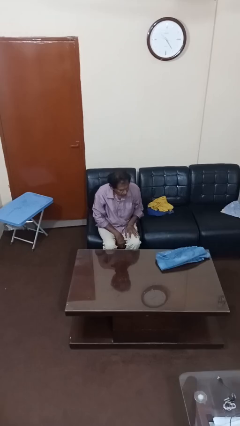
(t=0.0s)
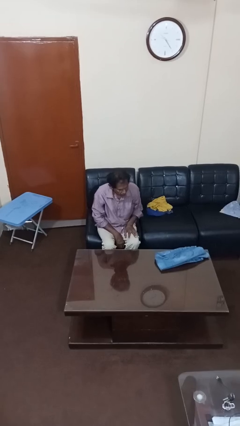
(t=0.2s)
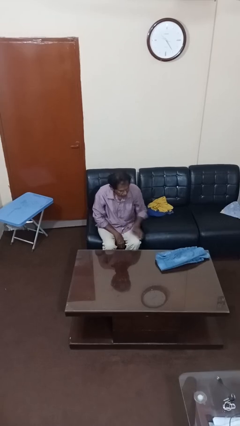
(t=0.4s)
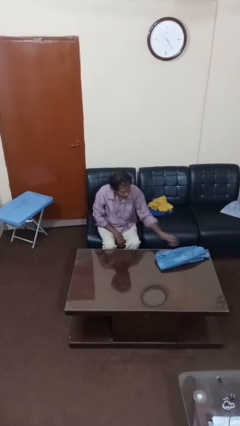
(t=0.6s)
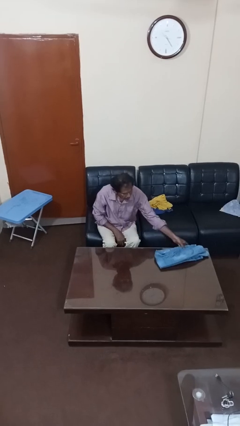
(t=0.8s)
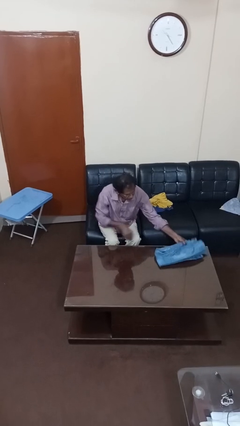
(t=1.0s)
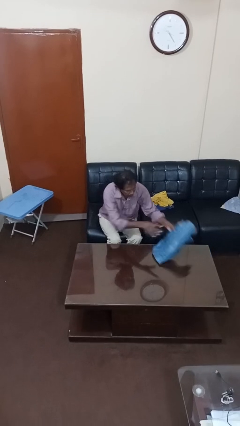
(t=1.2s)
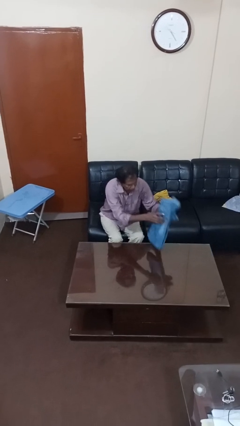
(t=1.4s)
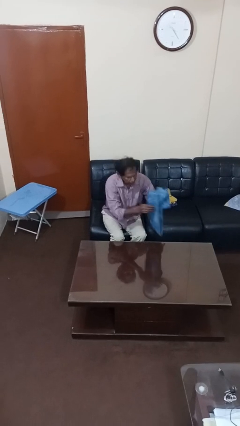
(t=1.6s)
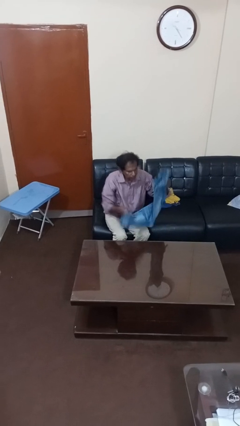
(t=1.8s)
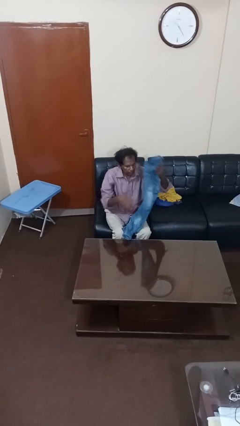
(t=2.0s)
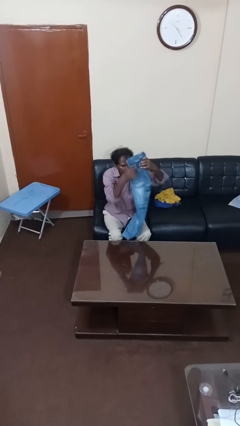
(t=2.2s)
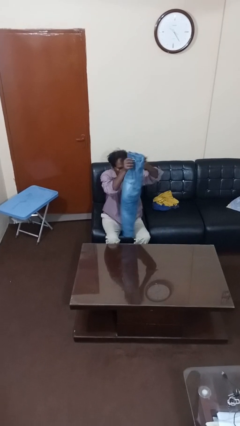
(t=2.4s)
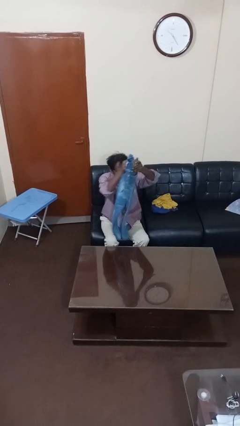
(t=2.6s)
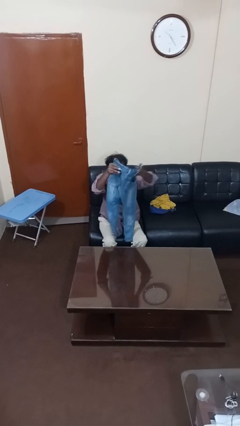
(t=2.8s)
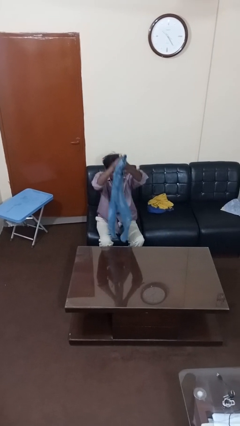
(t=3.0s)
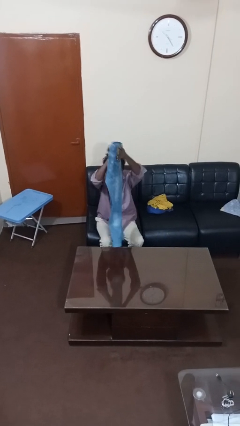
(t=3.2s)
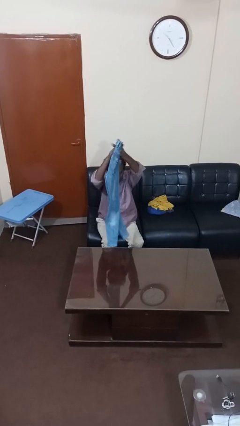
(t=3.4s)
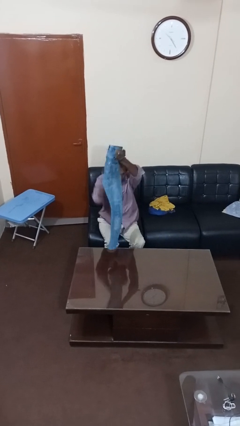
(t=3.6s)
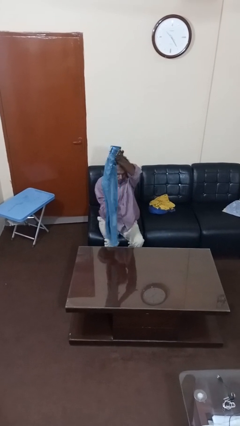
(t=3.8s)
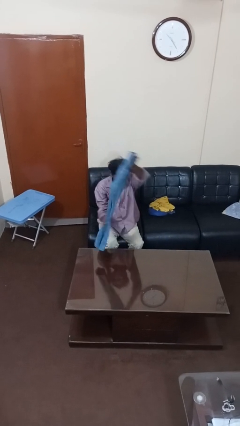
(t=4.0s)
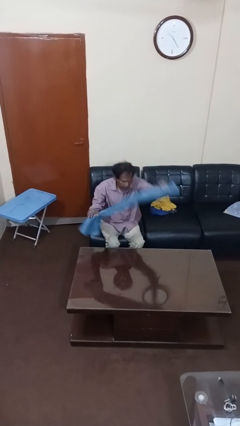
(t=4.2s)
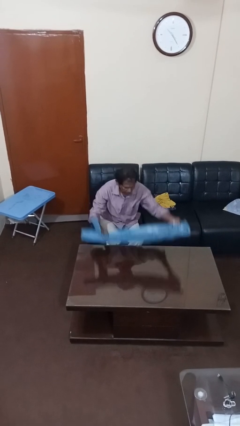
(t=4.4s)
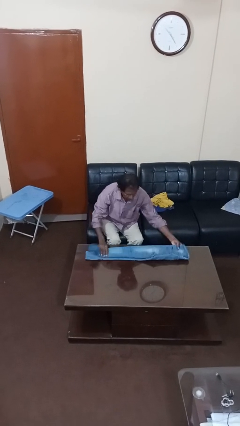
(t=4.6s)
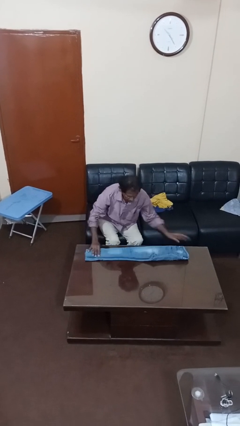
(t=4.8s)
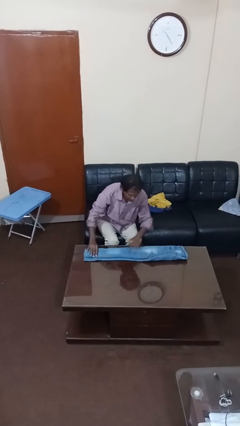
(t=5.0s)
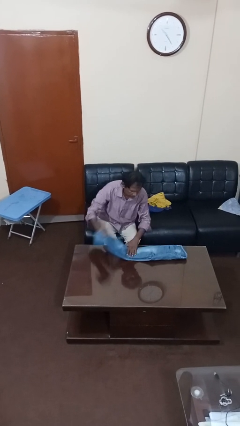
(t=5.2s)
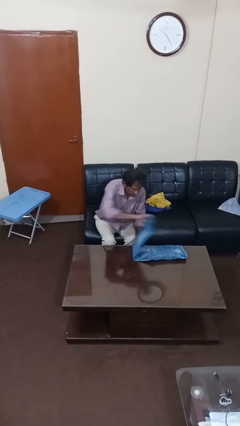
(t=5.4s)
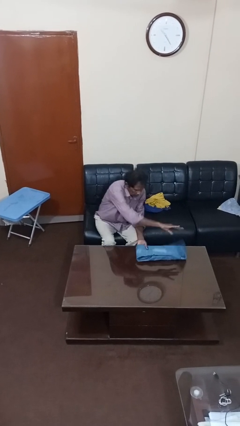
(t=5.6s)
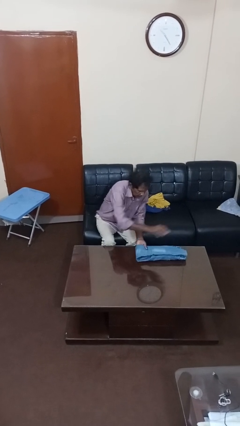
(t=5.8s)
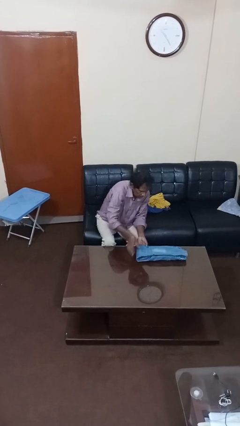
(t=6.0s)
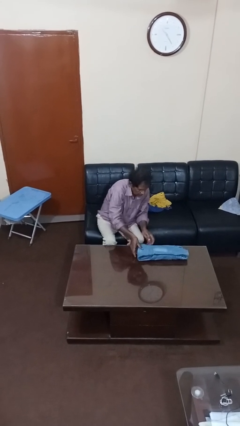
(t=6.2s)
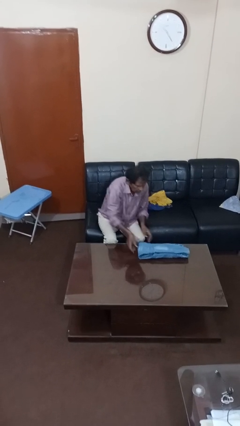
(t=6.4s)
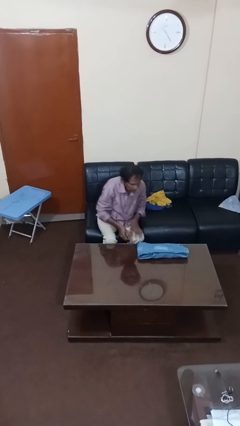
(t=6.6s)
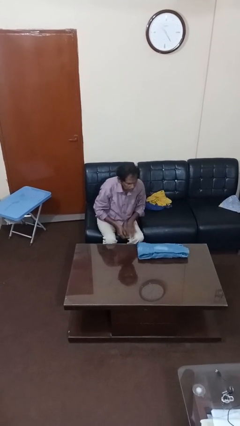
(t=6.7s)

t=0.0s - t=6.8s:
person folds pants

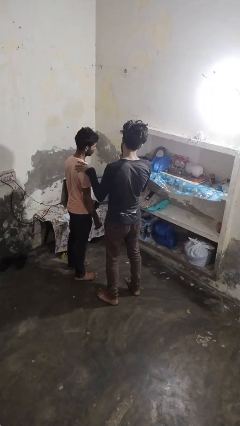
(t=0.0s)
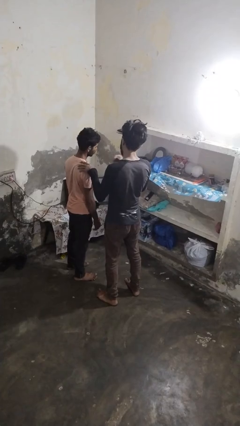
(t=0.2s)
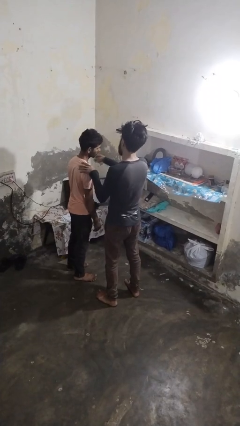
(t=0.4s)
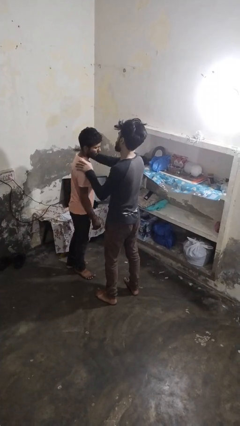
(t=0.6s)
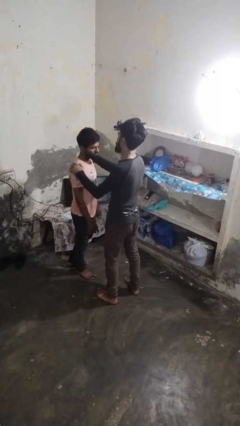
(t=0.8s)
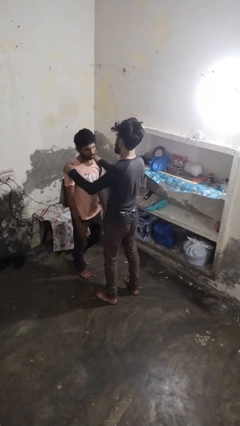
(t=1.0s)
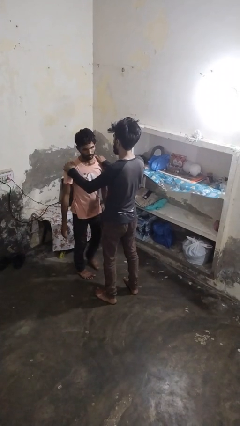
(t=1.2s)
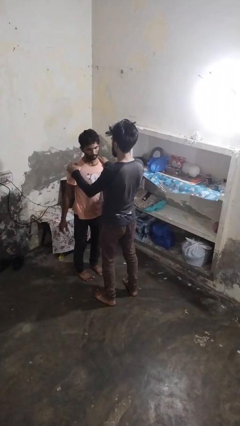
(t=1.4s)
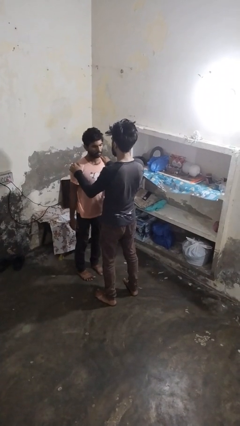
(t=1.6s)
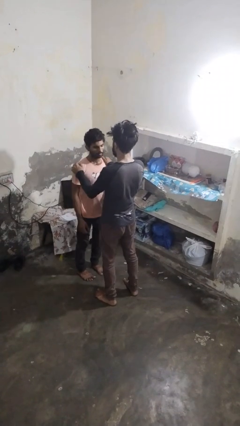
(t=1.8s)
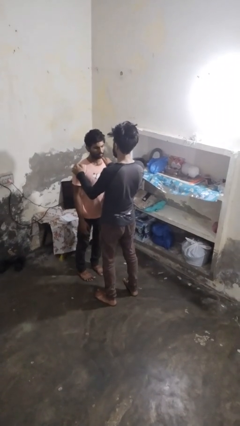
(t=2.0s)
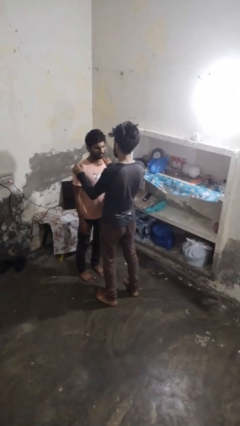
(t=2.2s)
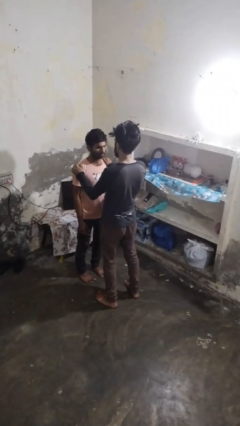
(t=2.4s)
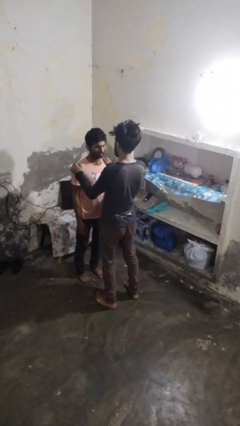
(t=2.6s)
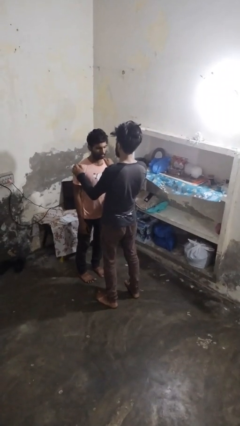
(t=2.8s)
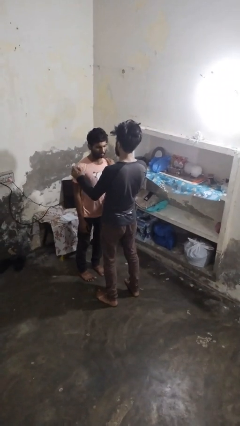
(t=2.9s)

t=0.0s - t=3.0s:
person spins person around

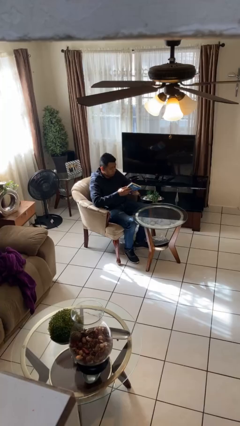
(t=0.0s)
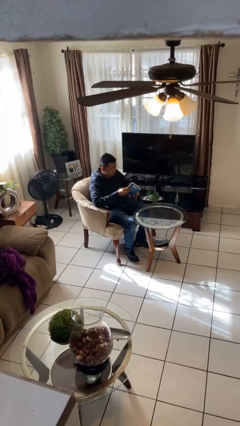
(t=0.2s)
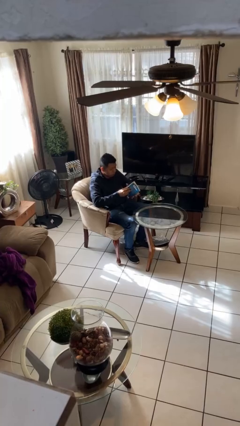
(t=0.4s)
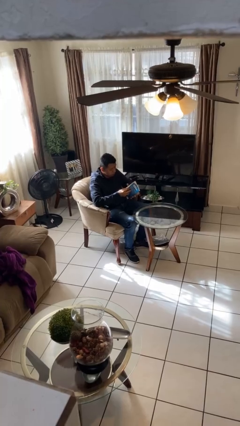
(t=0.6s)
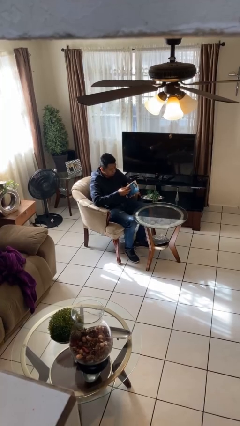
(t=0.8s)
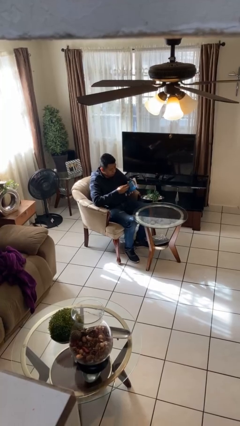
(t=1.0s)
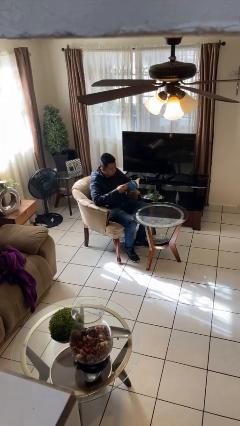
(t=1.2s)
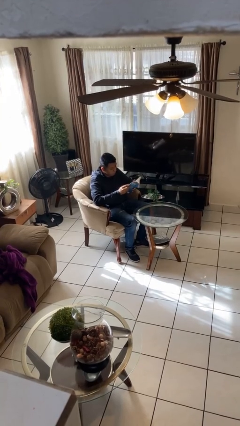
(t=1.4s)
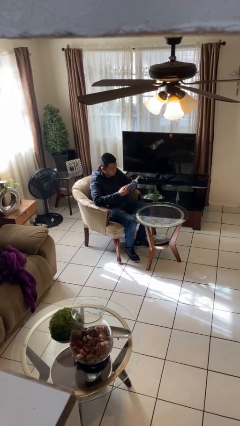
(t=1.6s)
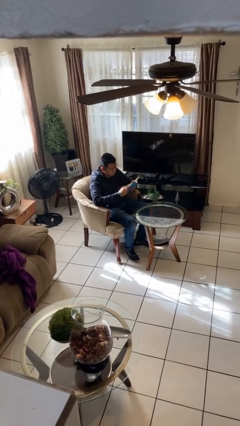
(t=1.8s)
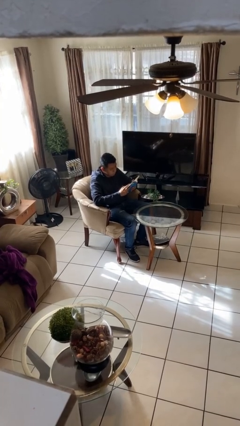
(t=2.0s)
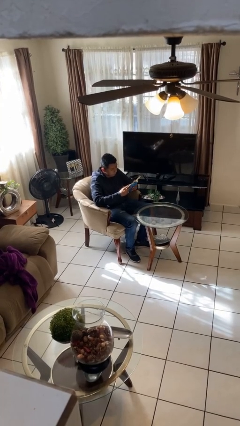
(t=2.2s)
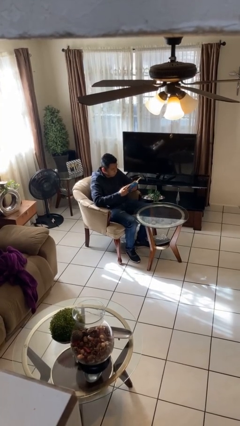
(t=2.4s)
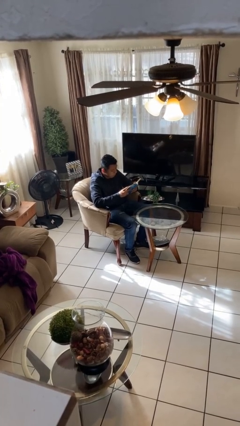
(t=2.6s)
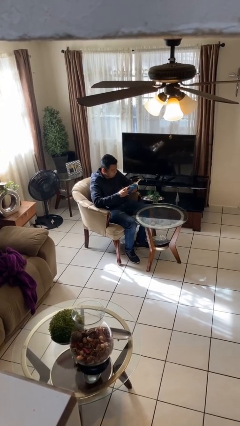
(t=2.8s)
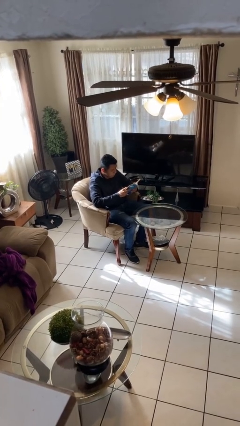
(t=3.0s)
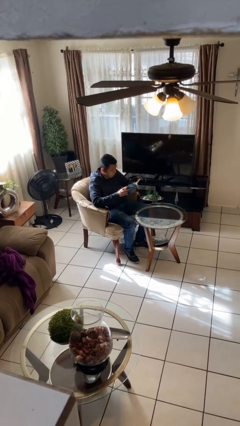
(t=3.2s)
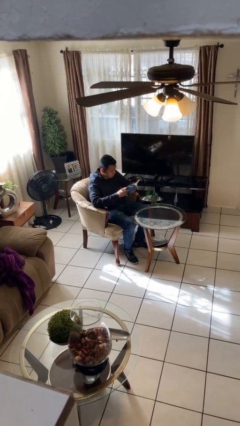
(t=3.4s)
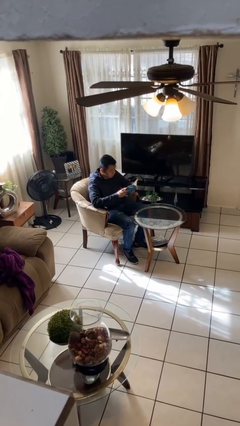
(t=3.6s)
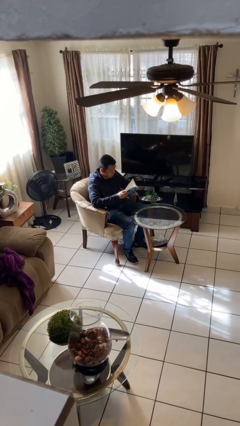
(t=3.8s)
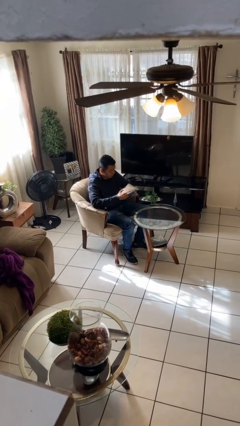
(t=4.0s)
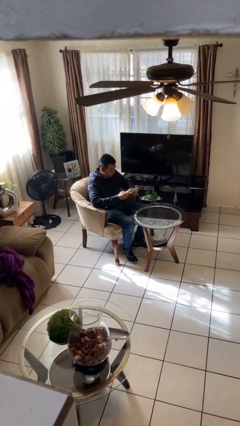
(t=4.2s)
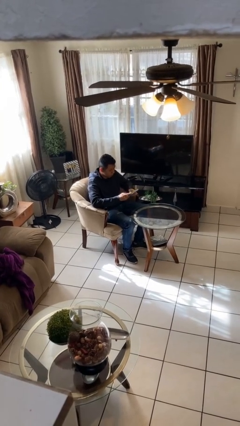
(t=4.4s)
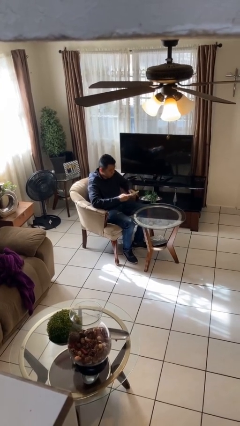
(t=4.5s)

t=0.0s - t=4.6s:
person reads document

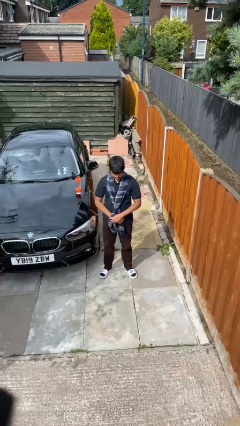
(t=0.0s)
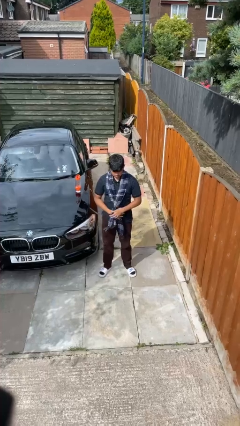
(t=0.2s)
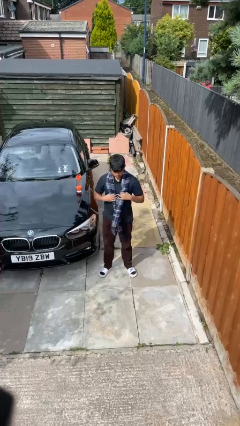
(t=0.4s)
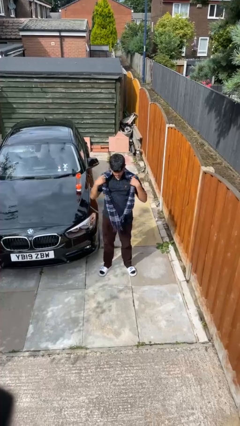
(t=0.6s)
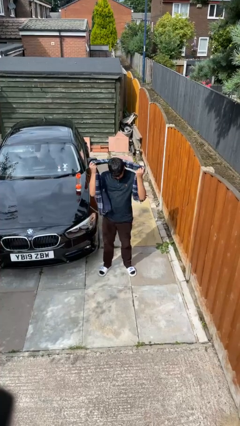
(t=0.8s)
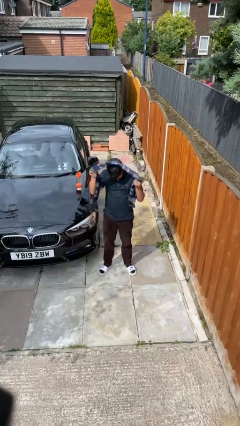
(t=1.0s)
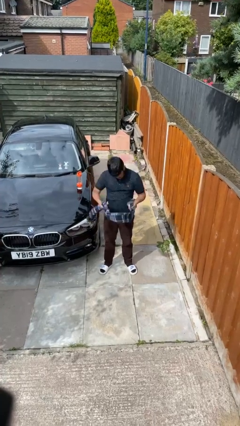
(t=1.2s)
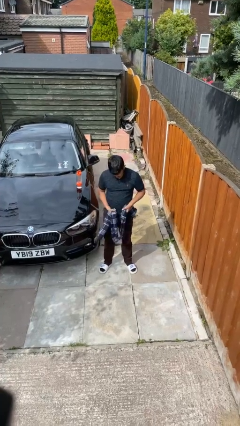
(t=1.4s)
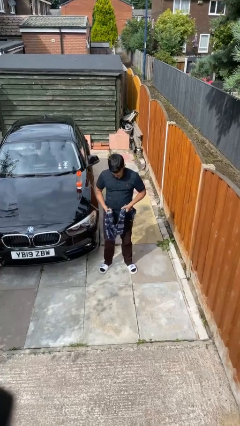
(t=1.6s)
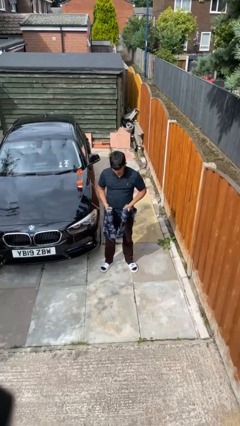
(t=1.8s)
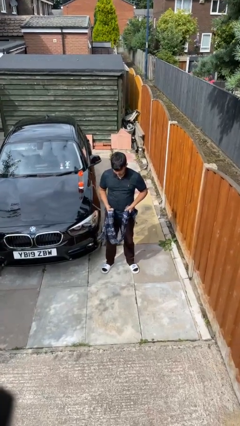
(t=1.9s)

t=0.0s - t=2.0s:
person takes off scarf

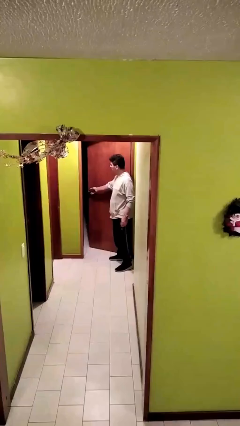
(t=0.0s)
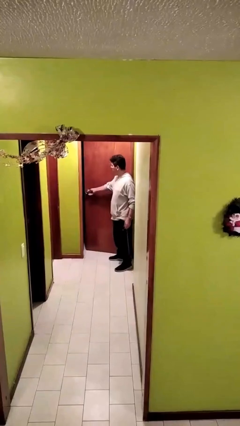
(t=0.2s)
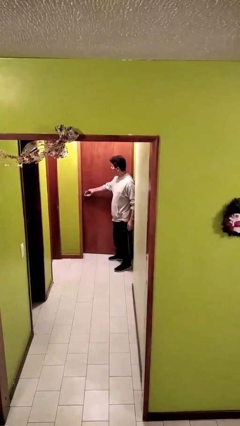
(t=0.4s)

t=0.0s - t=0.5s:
person closes facility door

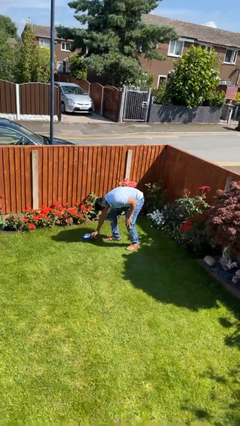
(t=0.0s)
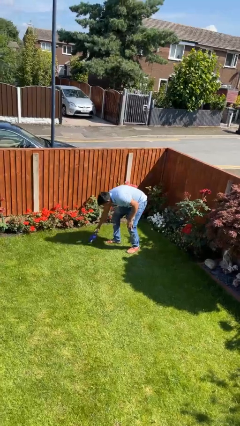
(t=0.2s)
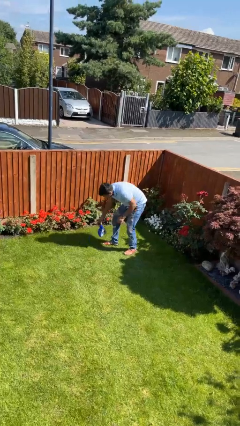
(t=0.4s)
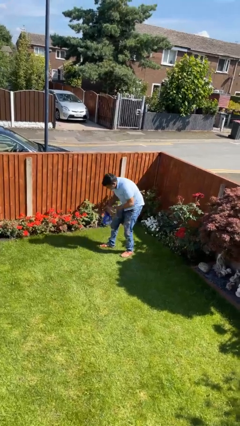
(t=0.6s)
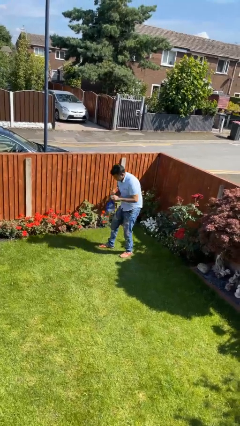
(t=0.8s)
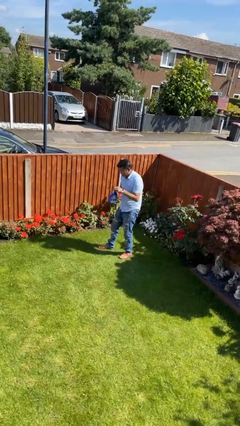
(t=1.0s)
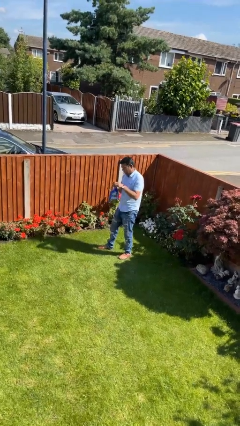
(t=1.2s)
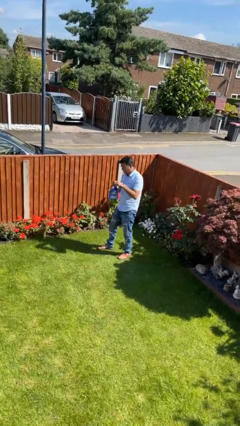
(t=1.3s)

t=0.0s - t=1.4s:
person picks up object from floor
